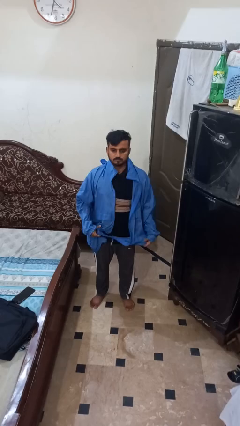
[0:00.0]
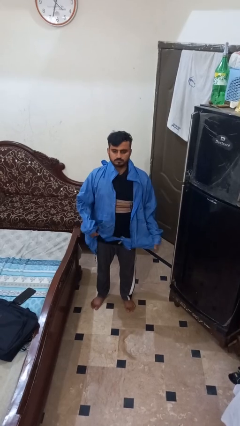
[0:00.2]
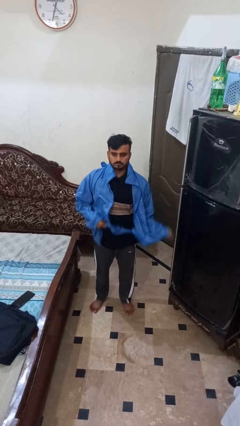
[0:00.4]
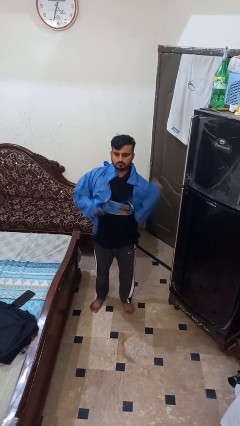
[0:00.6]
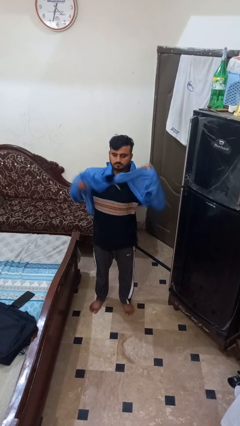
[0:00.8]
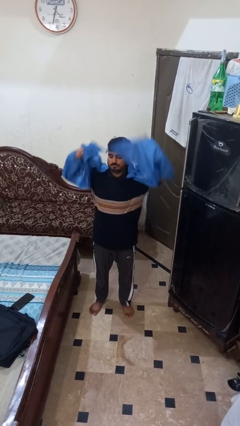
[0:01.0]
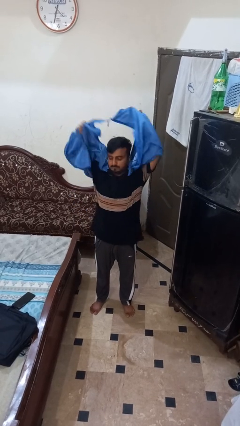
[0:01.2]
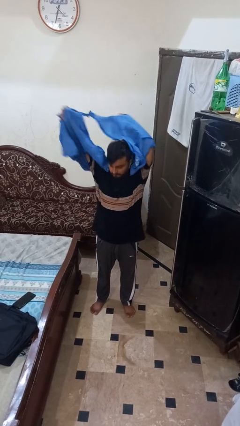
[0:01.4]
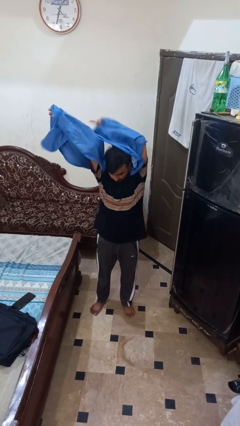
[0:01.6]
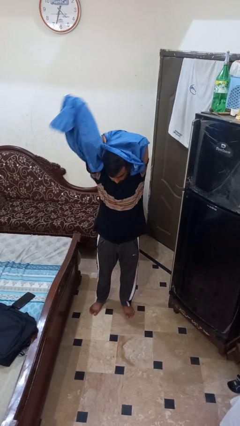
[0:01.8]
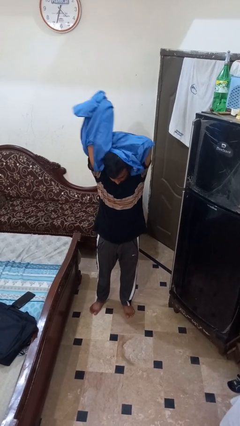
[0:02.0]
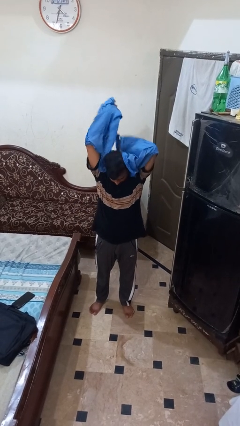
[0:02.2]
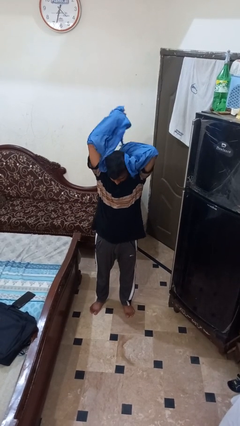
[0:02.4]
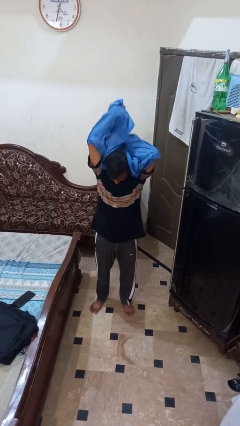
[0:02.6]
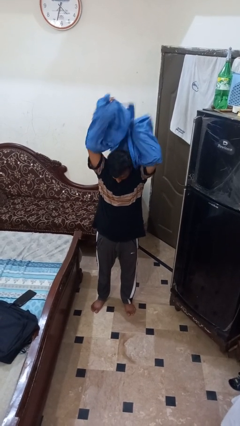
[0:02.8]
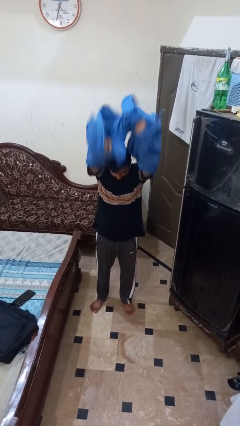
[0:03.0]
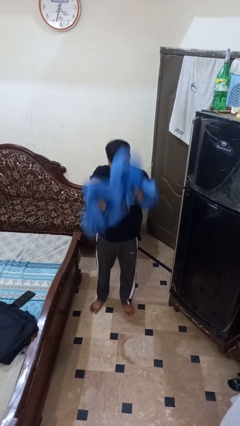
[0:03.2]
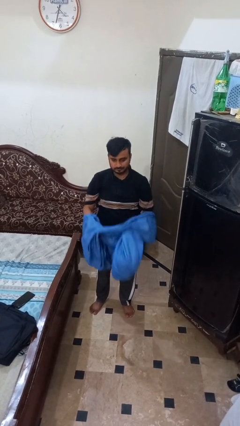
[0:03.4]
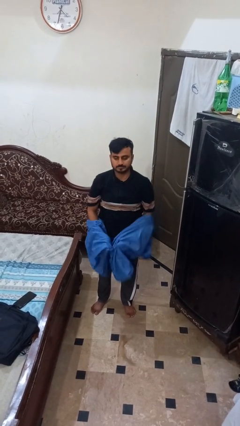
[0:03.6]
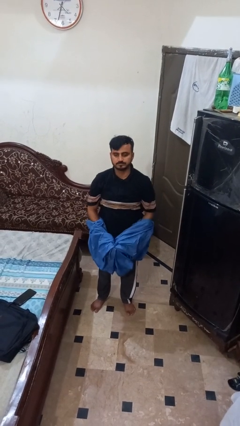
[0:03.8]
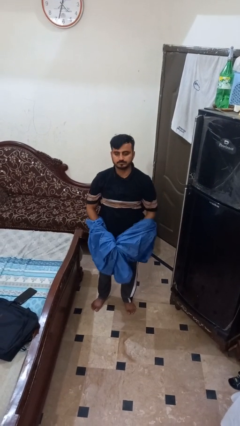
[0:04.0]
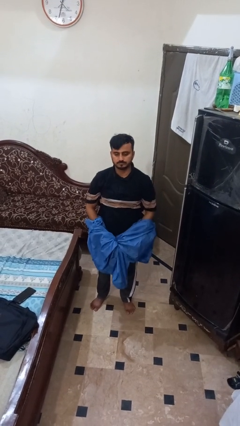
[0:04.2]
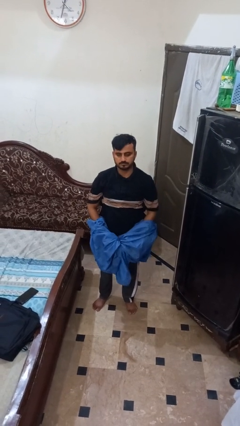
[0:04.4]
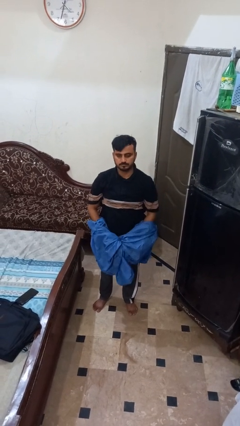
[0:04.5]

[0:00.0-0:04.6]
person takes off jacket

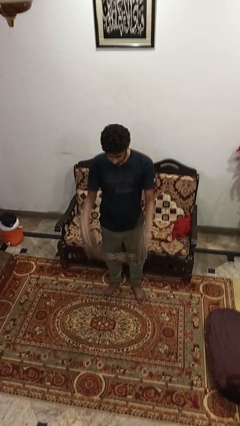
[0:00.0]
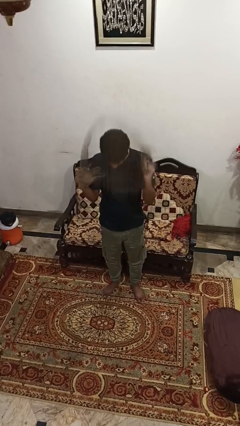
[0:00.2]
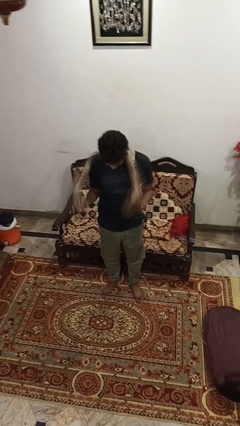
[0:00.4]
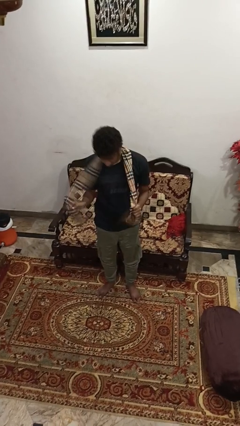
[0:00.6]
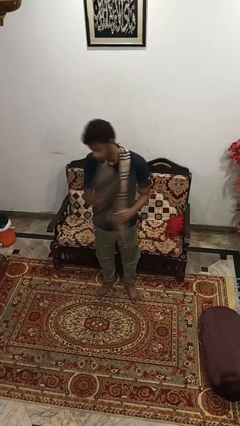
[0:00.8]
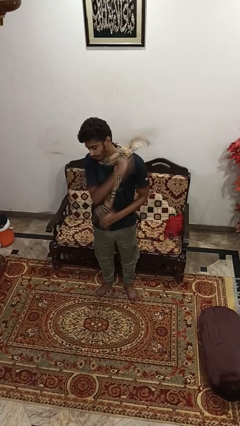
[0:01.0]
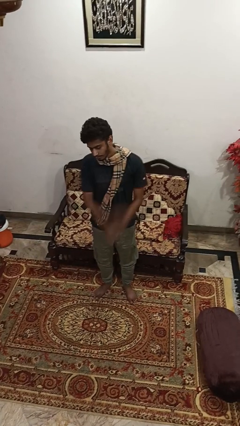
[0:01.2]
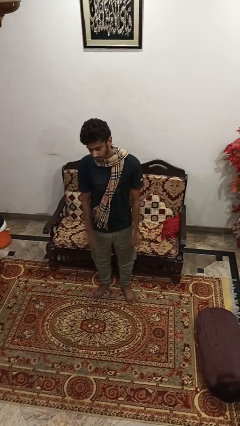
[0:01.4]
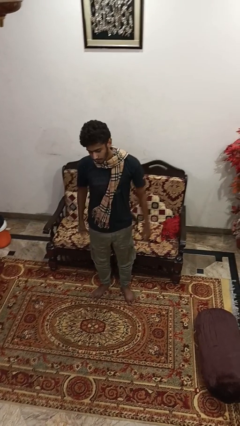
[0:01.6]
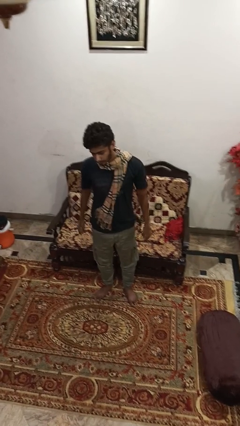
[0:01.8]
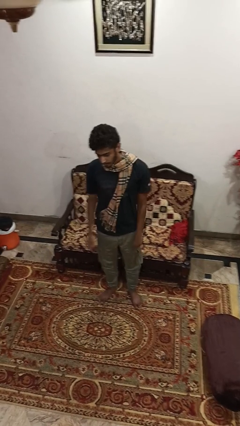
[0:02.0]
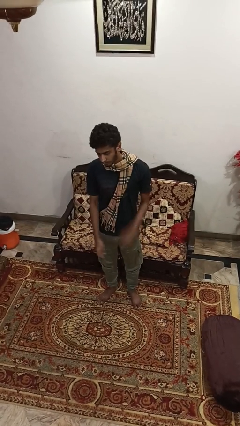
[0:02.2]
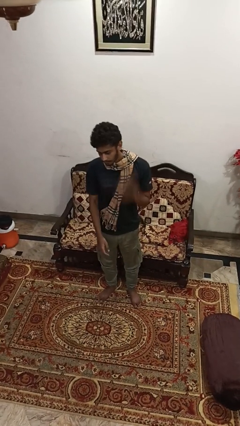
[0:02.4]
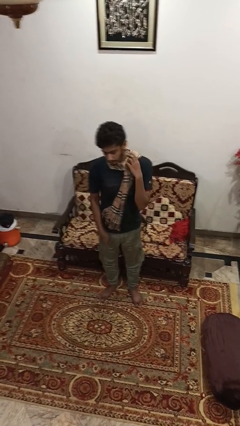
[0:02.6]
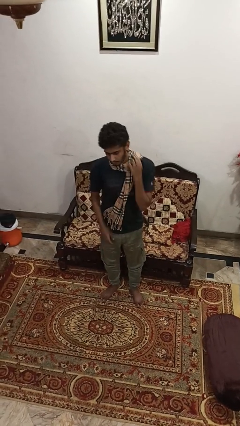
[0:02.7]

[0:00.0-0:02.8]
person puts on scarf

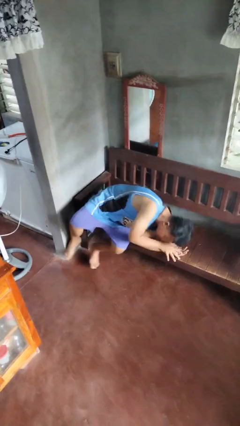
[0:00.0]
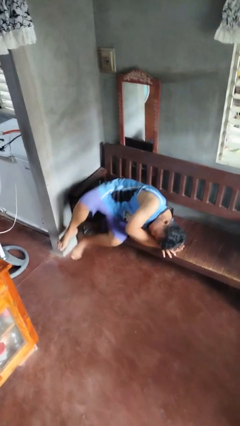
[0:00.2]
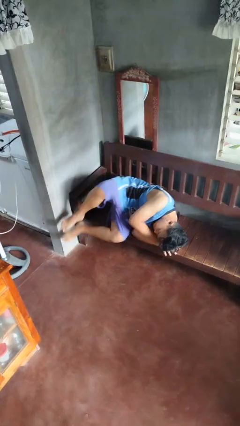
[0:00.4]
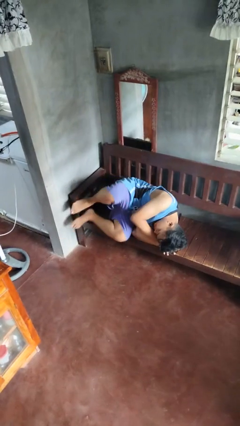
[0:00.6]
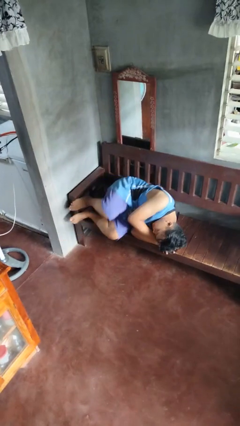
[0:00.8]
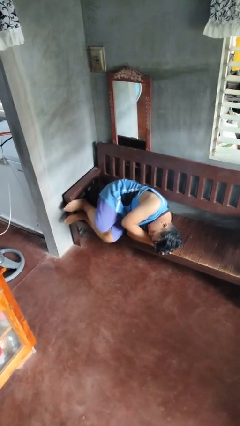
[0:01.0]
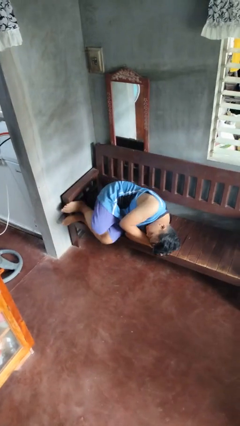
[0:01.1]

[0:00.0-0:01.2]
person lies down on couch

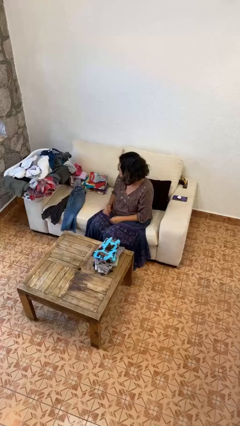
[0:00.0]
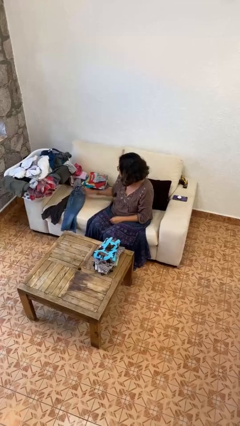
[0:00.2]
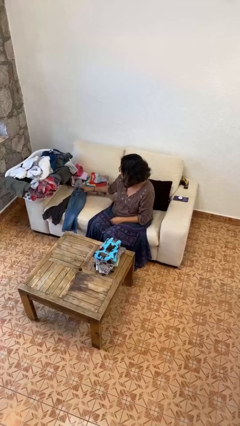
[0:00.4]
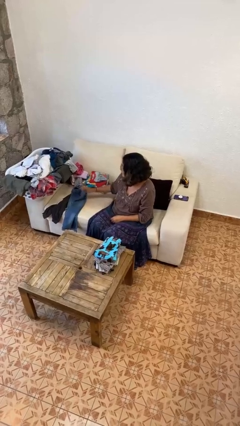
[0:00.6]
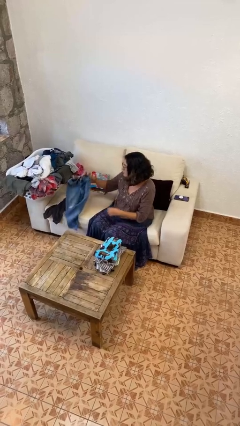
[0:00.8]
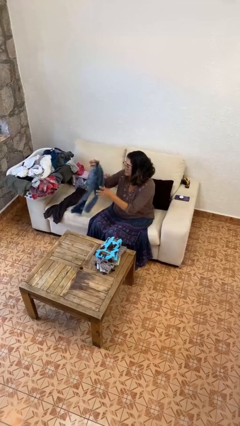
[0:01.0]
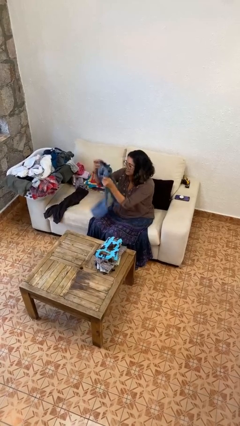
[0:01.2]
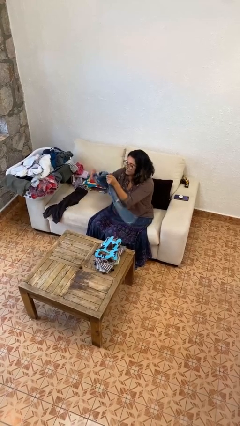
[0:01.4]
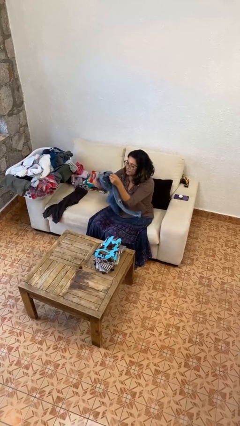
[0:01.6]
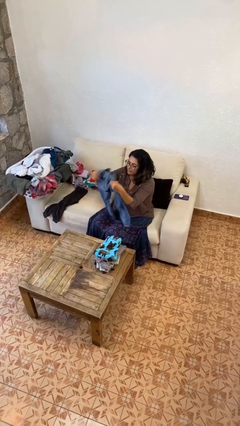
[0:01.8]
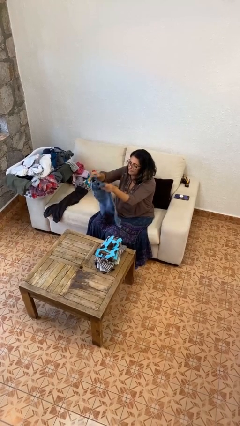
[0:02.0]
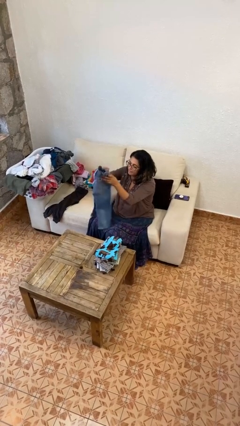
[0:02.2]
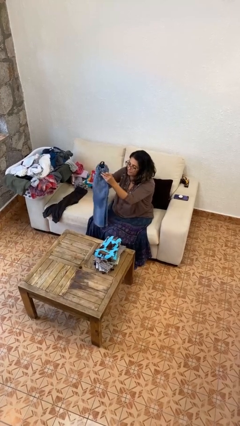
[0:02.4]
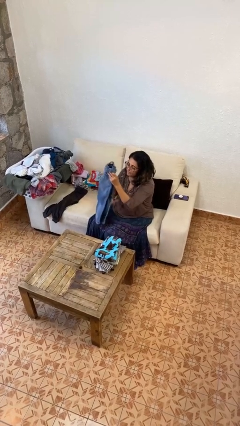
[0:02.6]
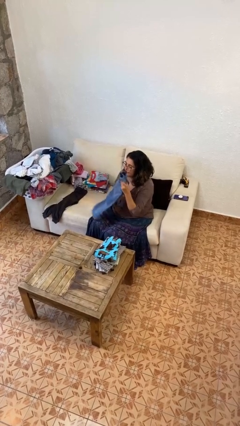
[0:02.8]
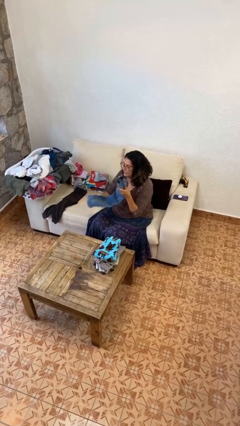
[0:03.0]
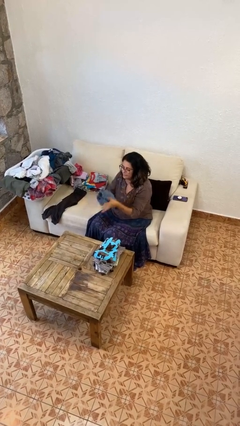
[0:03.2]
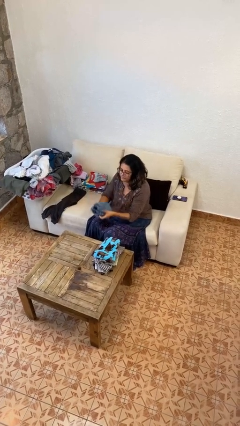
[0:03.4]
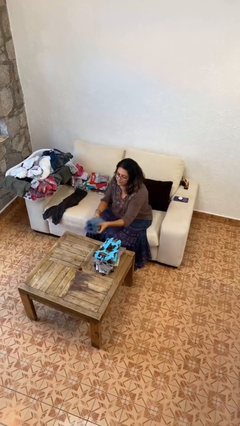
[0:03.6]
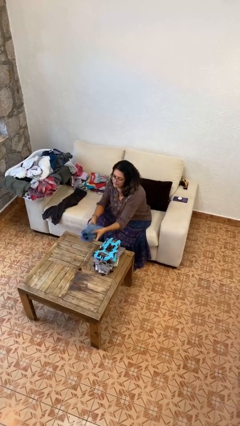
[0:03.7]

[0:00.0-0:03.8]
person folds pants

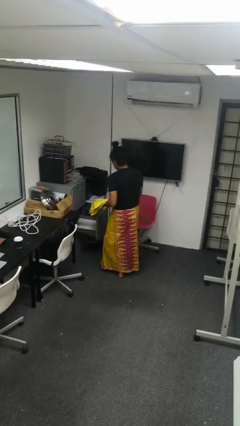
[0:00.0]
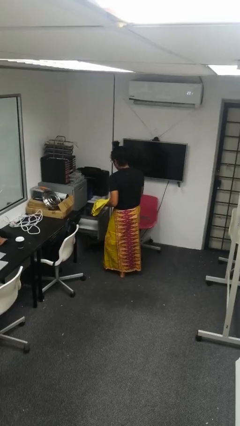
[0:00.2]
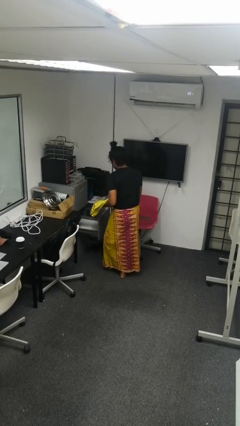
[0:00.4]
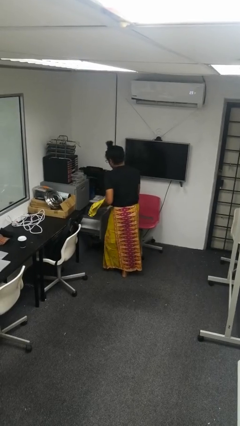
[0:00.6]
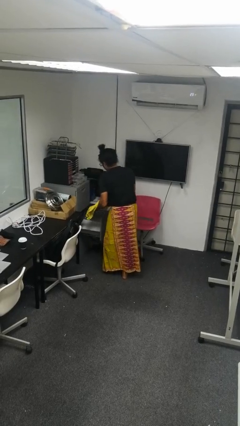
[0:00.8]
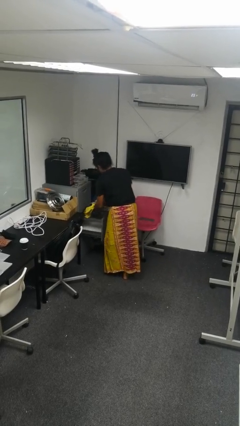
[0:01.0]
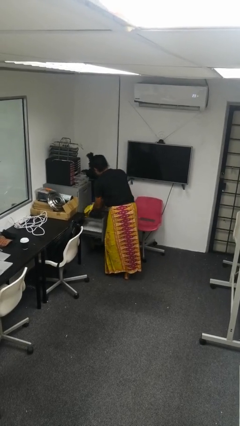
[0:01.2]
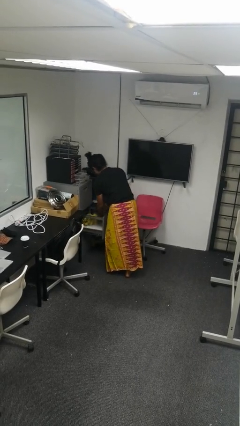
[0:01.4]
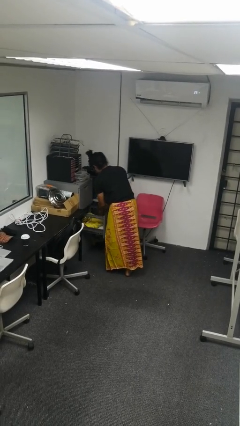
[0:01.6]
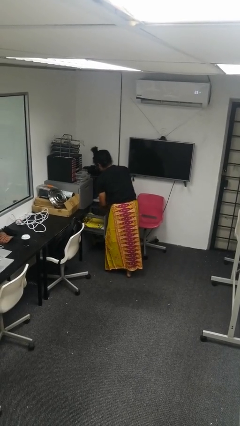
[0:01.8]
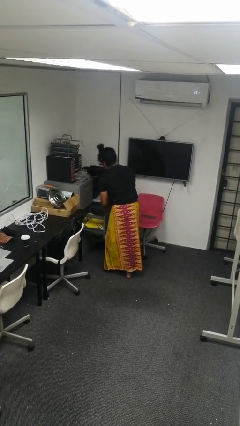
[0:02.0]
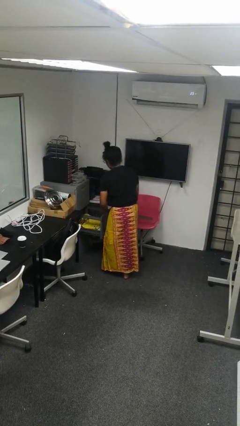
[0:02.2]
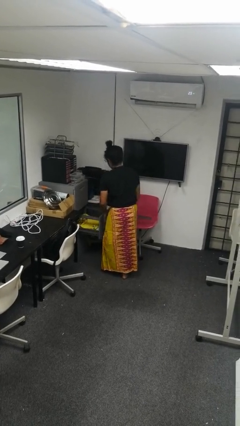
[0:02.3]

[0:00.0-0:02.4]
person puts clothes into dresser

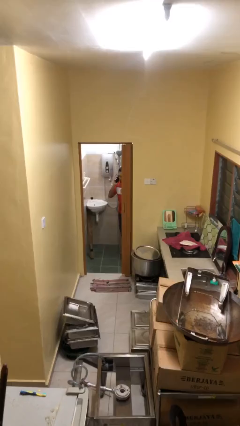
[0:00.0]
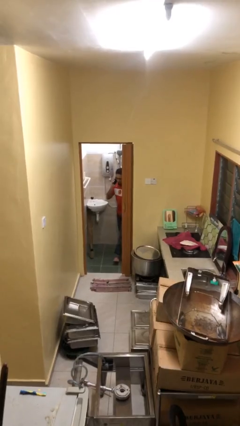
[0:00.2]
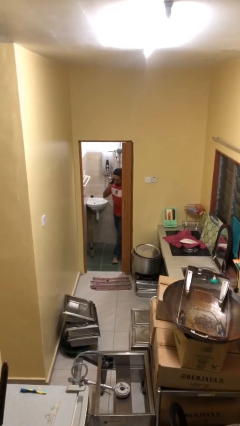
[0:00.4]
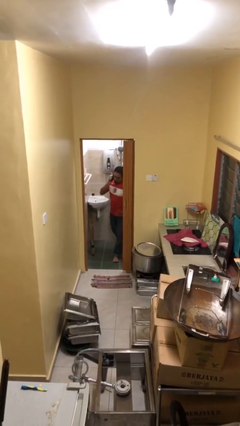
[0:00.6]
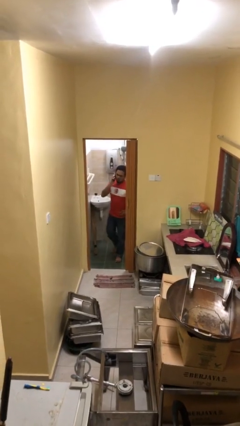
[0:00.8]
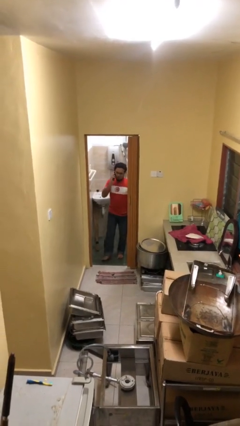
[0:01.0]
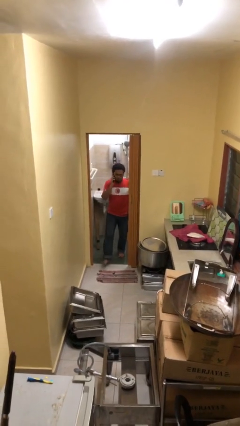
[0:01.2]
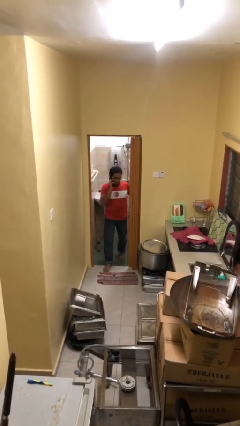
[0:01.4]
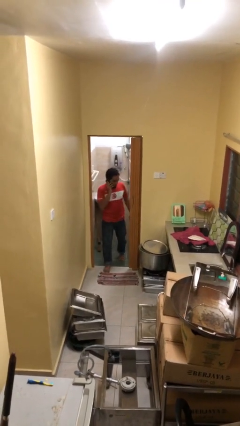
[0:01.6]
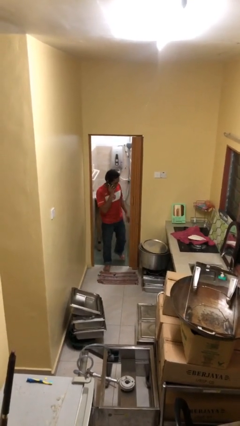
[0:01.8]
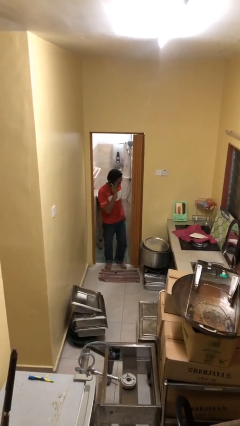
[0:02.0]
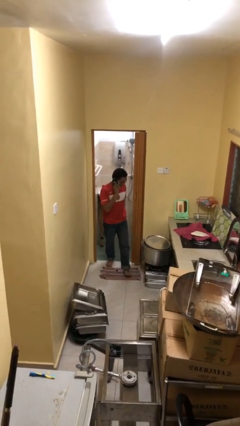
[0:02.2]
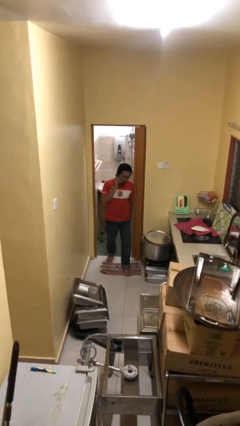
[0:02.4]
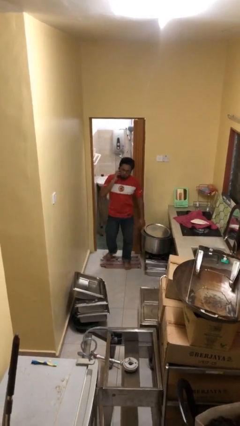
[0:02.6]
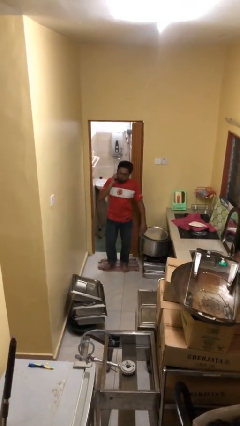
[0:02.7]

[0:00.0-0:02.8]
person enters scene through structure
